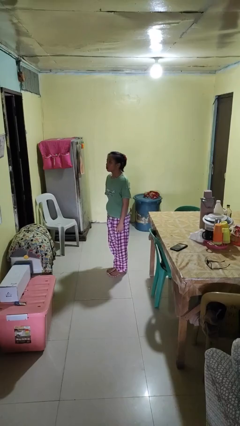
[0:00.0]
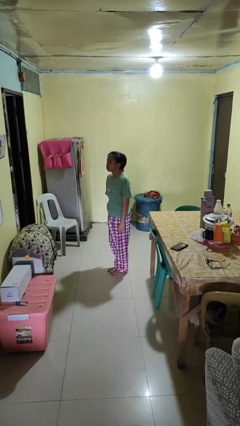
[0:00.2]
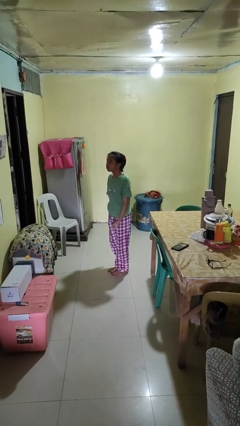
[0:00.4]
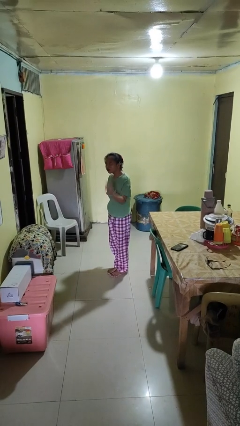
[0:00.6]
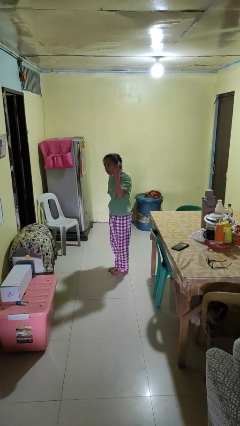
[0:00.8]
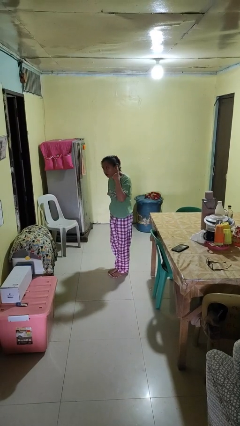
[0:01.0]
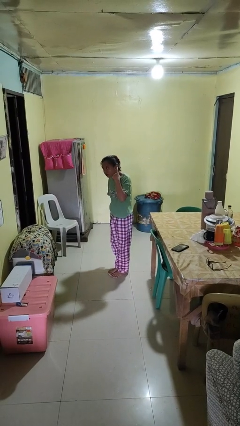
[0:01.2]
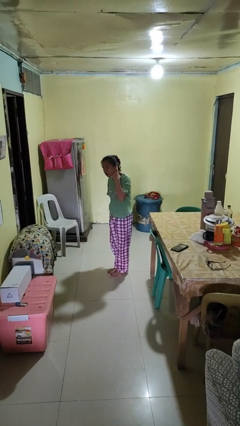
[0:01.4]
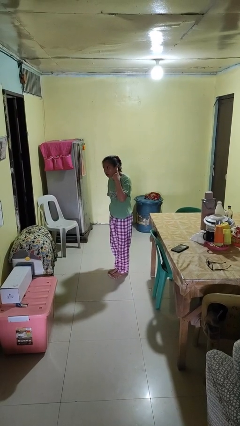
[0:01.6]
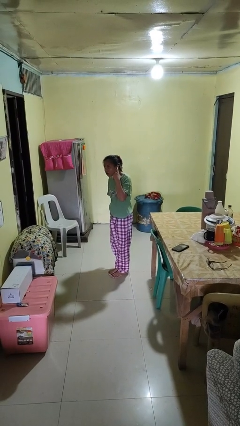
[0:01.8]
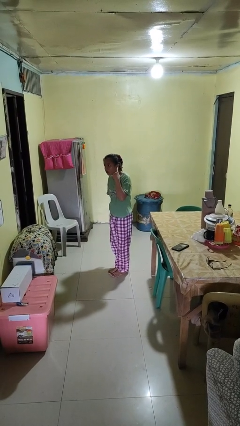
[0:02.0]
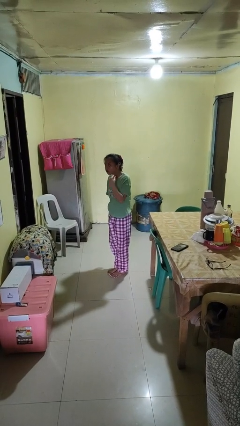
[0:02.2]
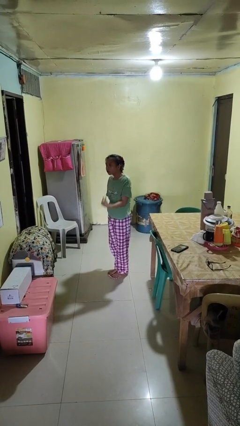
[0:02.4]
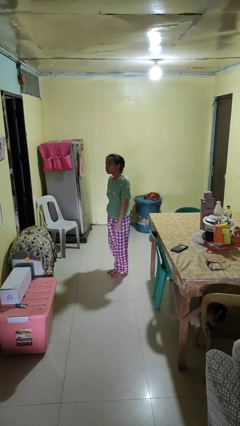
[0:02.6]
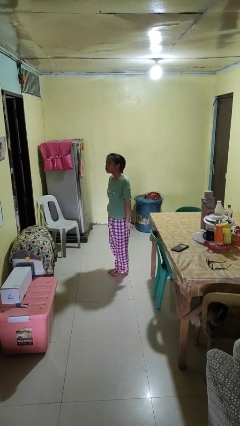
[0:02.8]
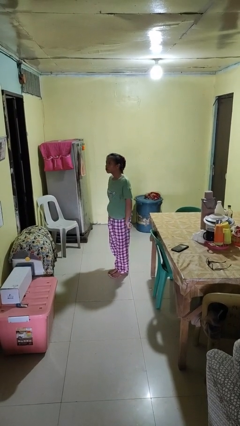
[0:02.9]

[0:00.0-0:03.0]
person gestures listen closely

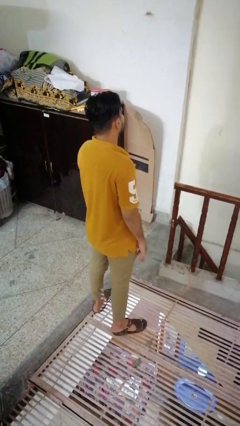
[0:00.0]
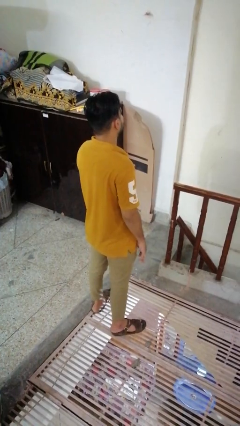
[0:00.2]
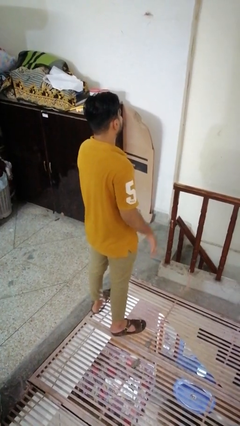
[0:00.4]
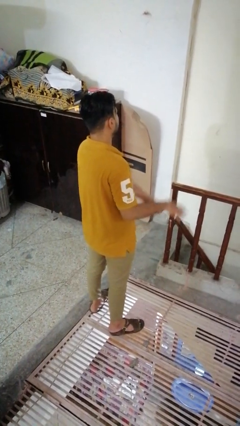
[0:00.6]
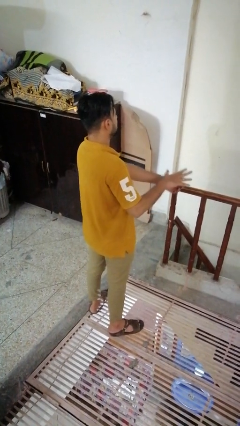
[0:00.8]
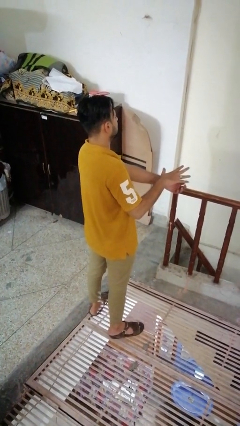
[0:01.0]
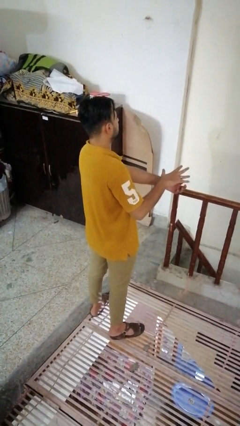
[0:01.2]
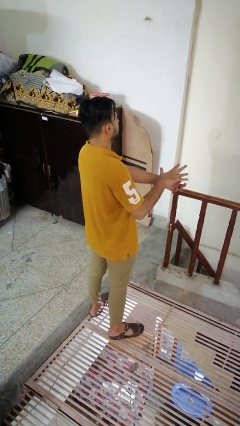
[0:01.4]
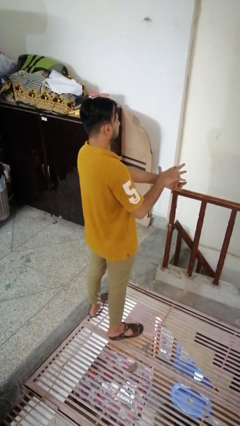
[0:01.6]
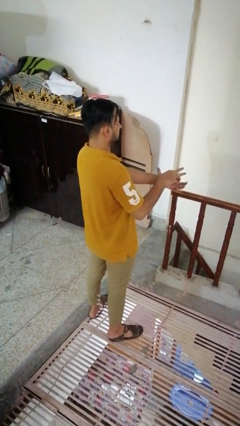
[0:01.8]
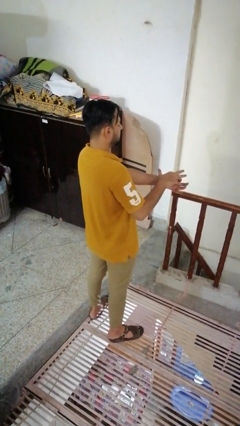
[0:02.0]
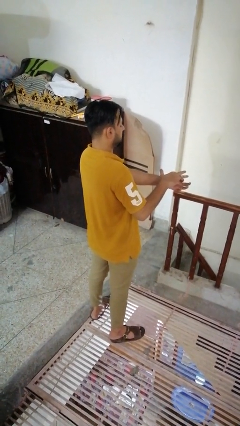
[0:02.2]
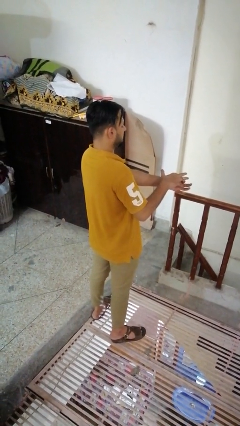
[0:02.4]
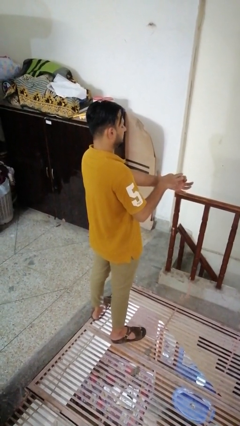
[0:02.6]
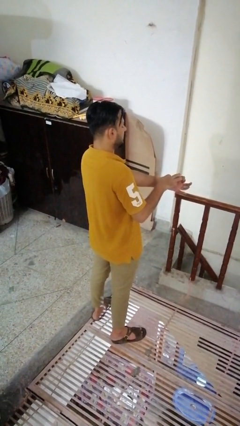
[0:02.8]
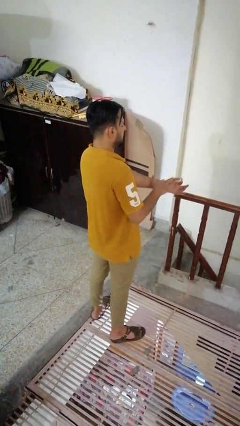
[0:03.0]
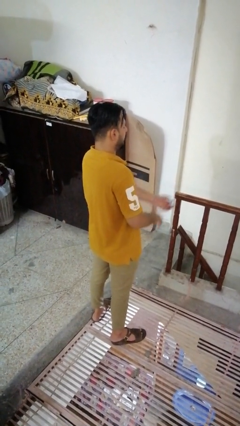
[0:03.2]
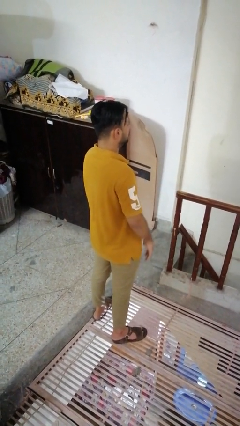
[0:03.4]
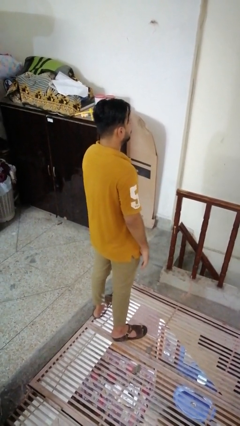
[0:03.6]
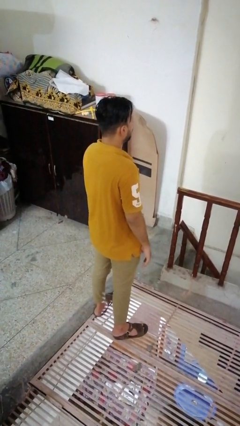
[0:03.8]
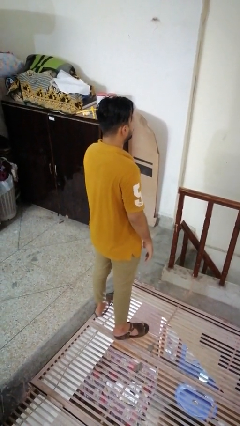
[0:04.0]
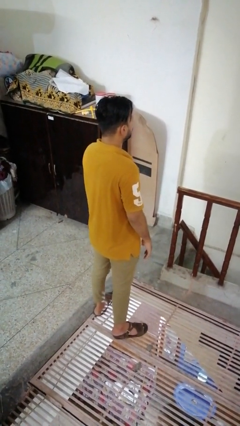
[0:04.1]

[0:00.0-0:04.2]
person takes off ring

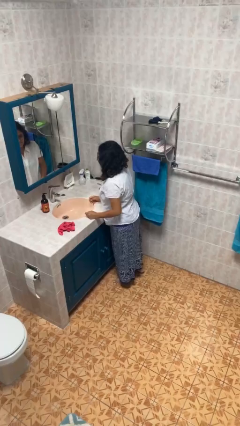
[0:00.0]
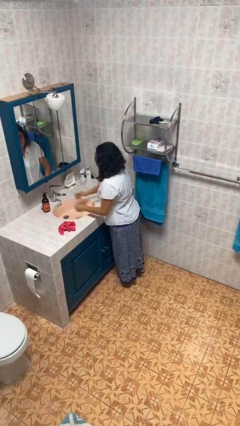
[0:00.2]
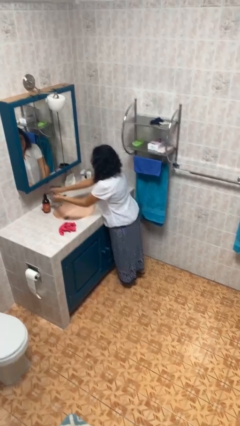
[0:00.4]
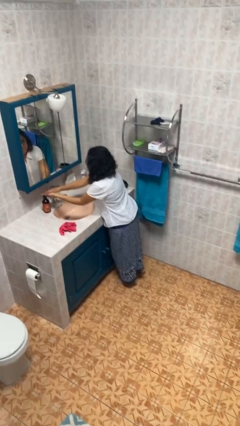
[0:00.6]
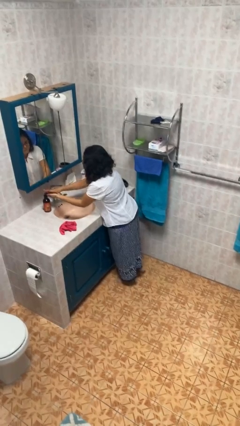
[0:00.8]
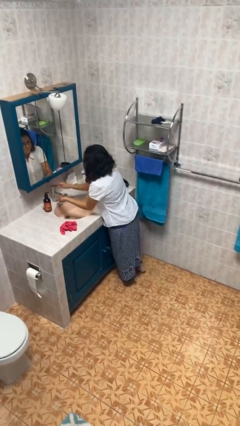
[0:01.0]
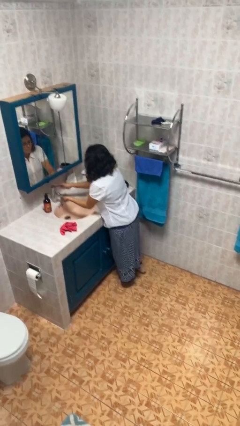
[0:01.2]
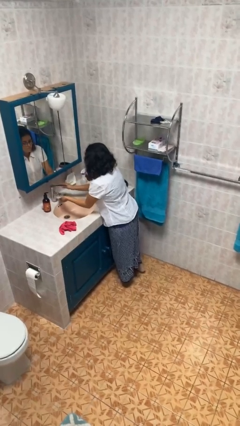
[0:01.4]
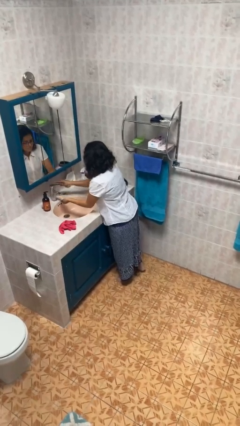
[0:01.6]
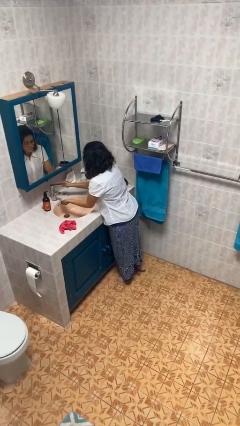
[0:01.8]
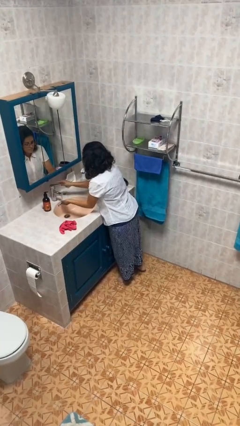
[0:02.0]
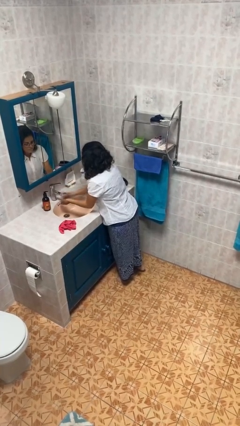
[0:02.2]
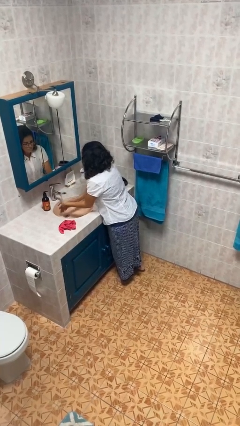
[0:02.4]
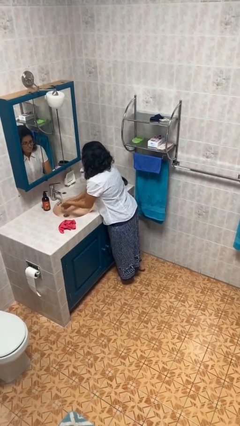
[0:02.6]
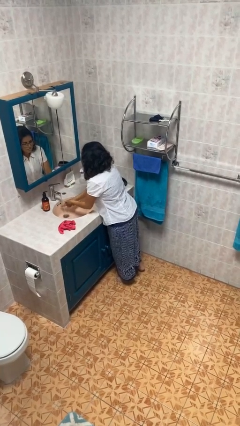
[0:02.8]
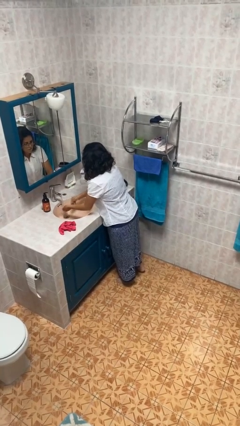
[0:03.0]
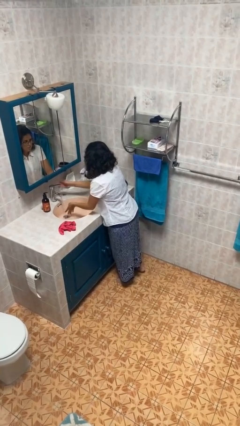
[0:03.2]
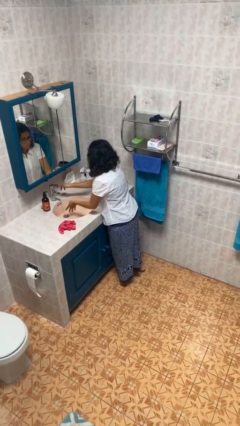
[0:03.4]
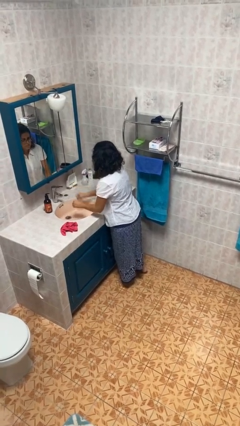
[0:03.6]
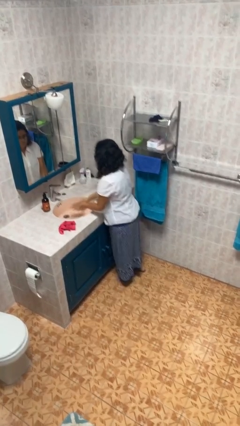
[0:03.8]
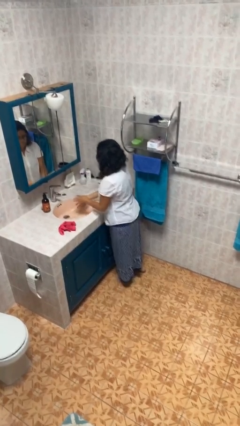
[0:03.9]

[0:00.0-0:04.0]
person washes hands

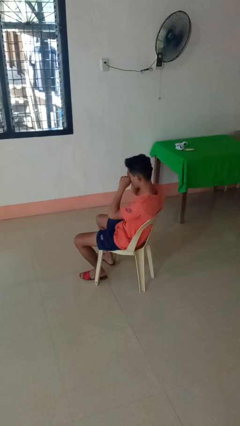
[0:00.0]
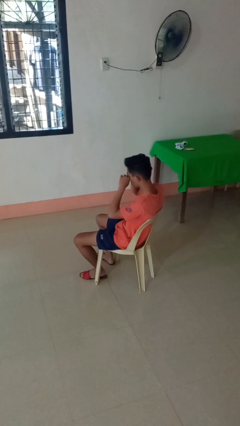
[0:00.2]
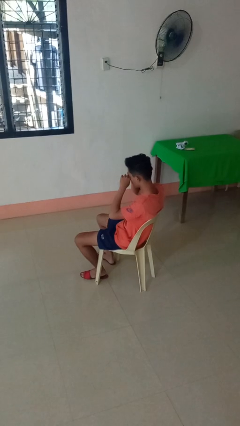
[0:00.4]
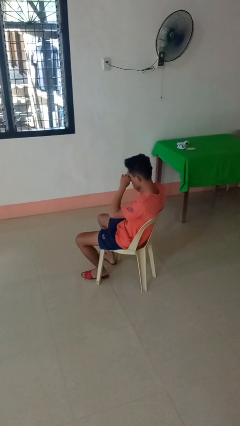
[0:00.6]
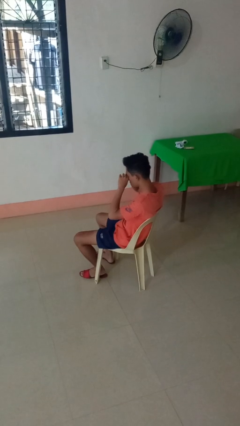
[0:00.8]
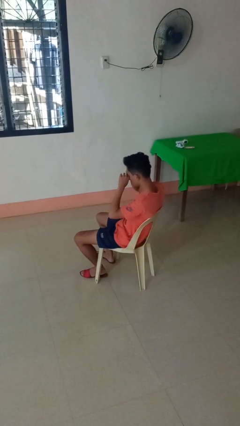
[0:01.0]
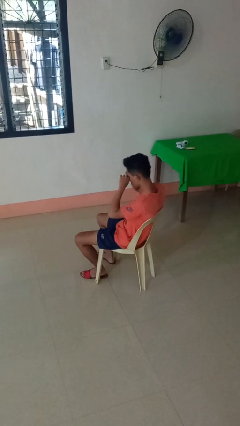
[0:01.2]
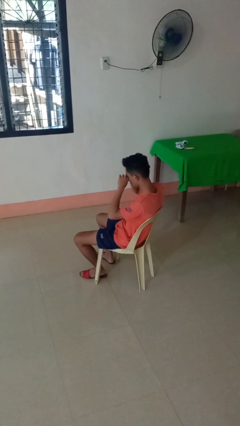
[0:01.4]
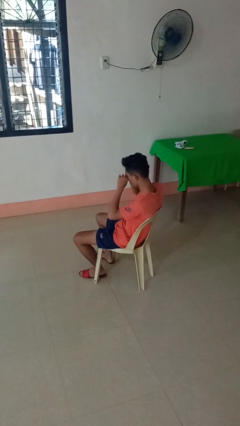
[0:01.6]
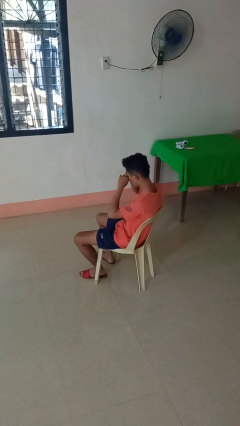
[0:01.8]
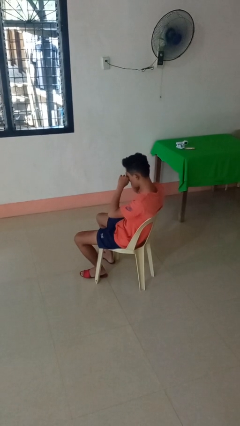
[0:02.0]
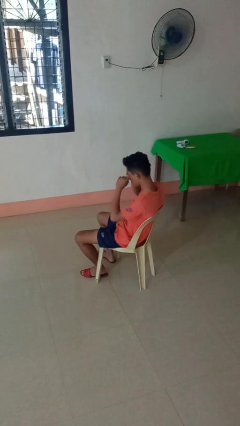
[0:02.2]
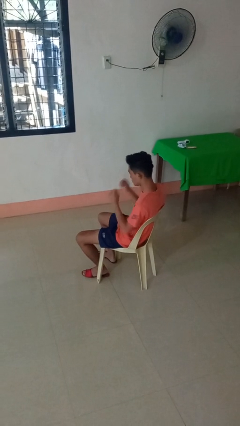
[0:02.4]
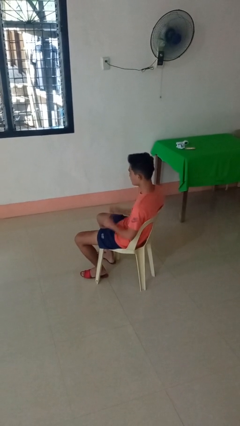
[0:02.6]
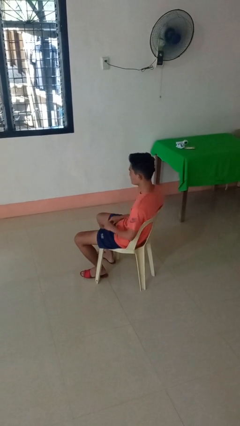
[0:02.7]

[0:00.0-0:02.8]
person rubs eyes

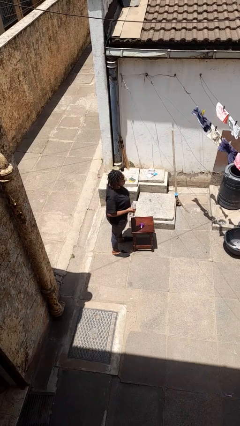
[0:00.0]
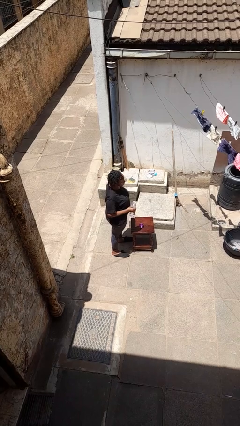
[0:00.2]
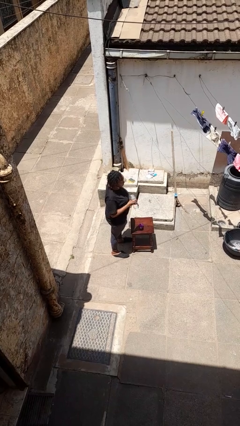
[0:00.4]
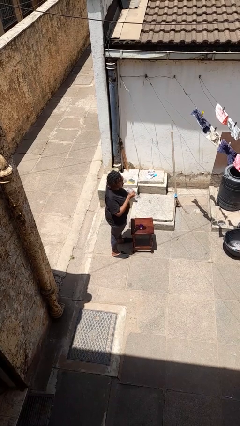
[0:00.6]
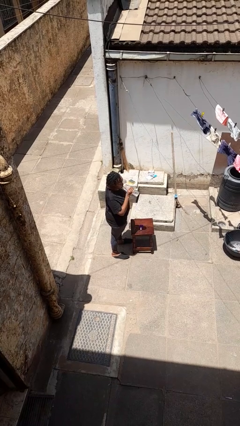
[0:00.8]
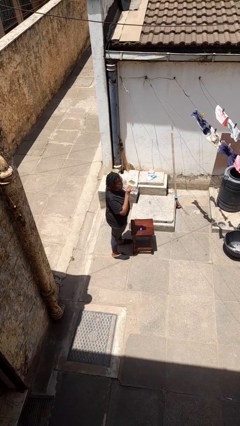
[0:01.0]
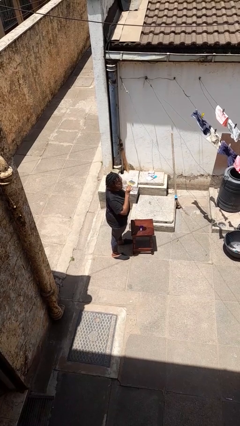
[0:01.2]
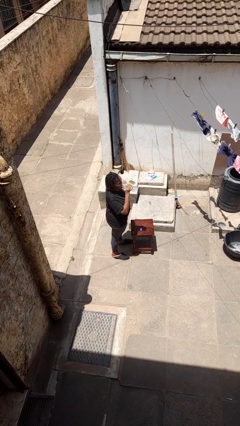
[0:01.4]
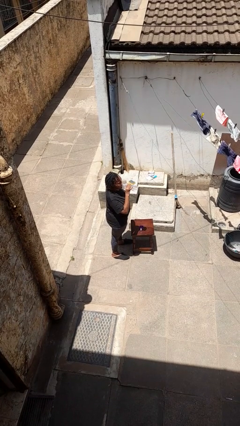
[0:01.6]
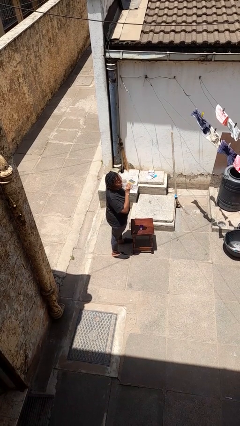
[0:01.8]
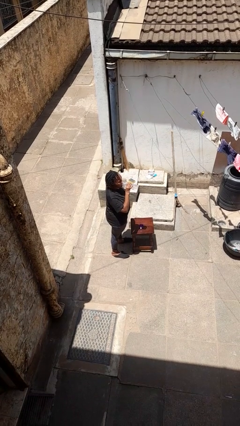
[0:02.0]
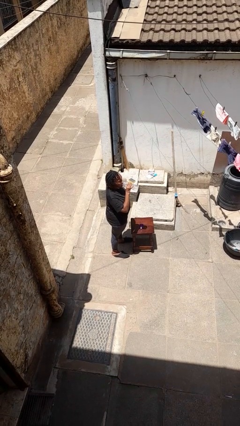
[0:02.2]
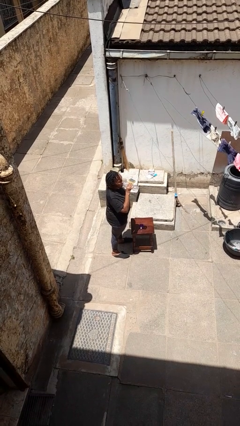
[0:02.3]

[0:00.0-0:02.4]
person drinks from bottle

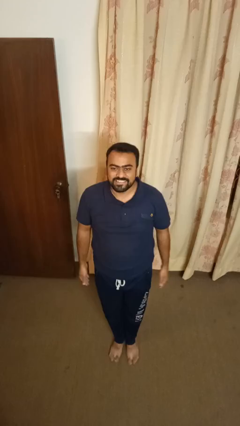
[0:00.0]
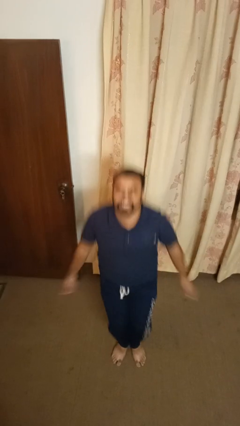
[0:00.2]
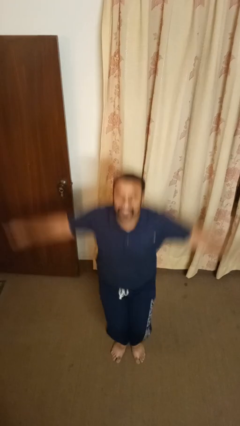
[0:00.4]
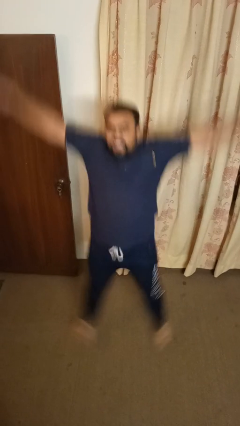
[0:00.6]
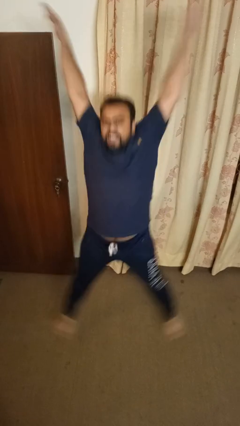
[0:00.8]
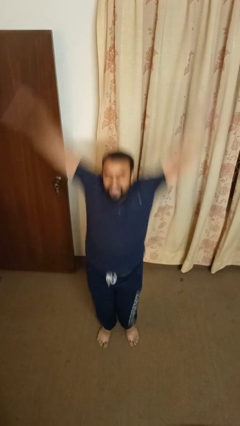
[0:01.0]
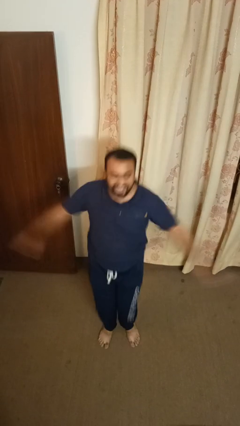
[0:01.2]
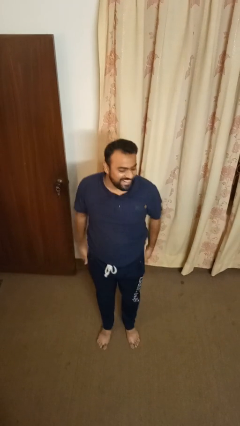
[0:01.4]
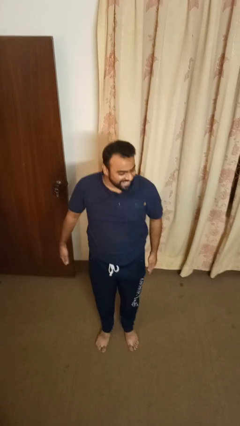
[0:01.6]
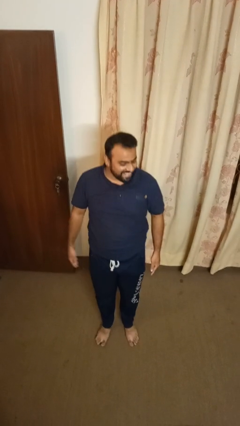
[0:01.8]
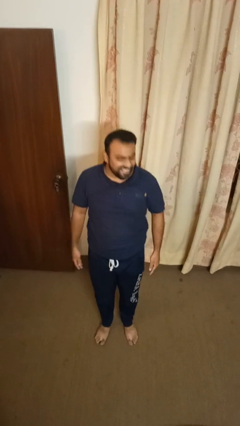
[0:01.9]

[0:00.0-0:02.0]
person exercises with jumping jacks
